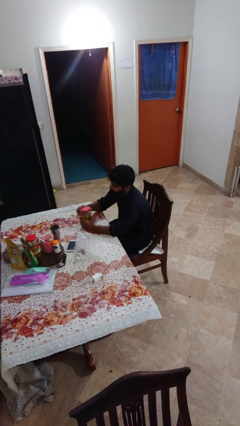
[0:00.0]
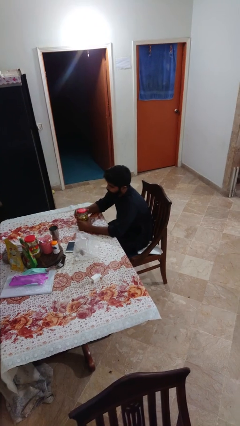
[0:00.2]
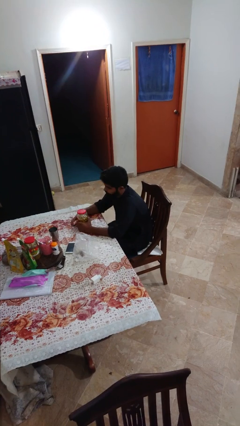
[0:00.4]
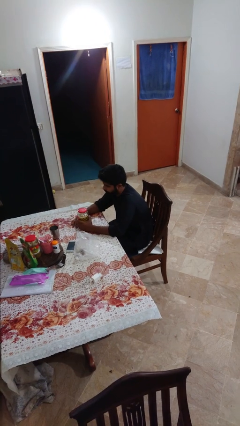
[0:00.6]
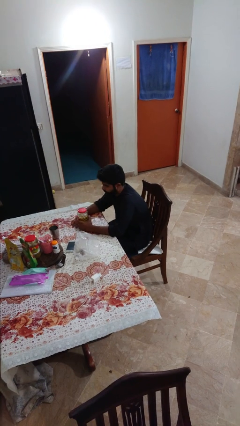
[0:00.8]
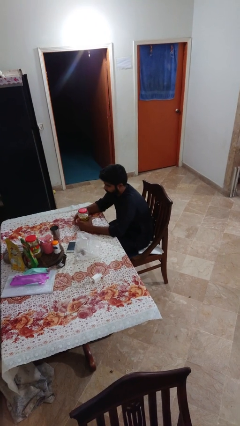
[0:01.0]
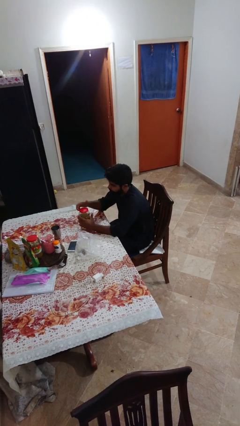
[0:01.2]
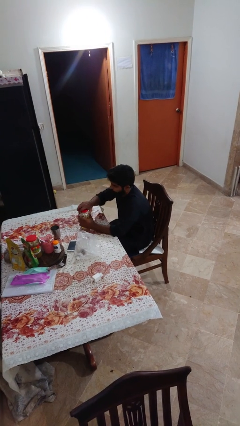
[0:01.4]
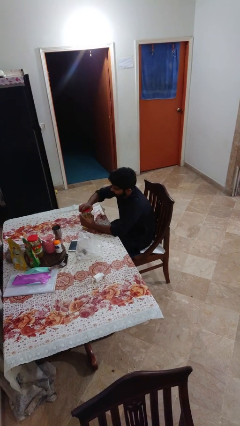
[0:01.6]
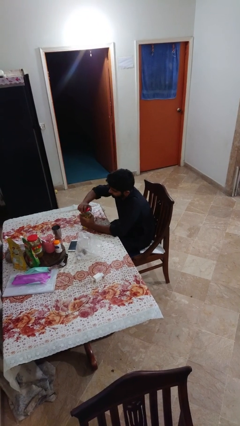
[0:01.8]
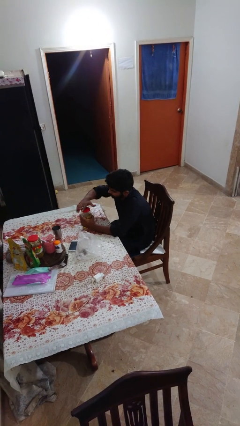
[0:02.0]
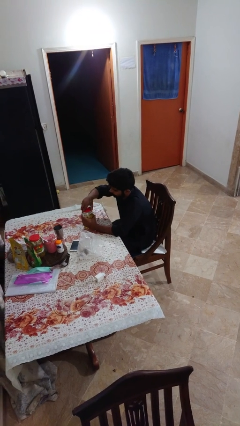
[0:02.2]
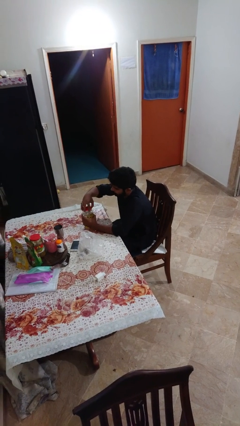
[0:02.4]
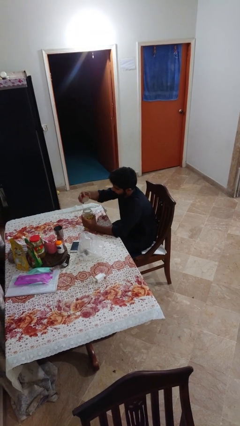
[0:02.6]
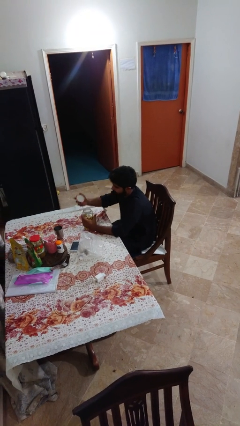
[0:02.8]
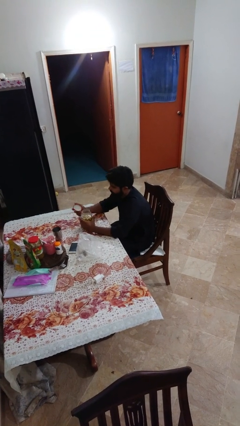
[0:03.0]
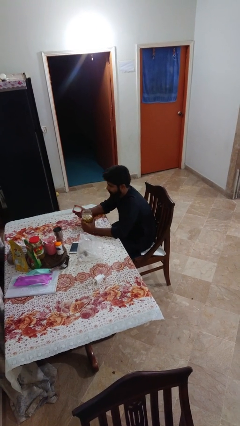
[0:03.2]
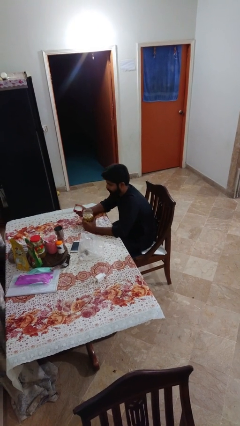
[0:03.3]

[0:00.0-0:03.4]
person opens jar

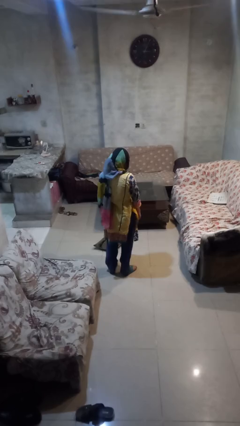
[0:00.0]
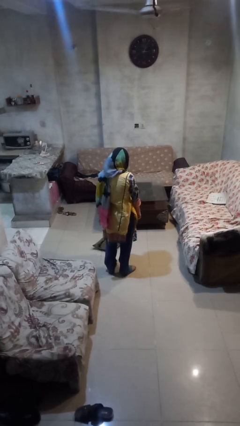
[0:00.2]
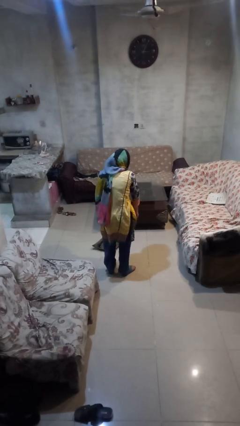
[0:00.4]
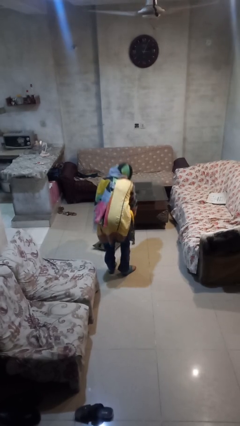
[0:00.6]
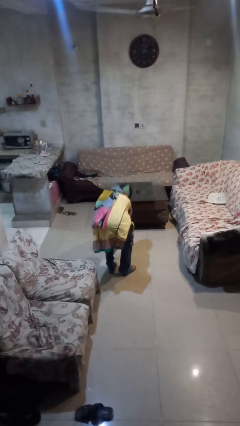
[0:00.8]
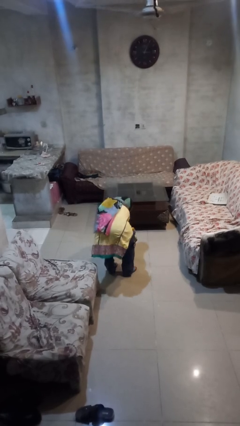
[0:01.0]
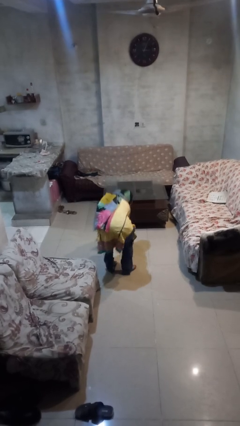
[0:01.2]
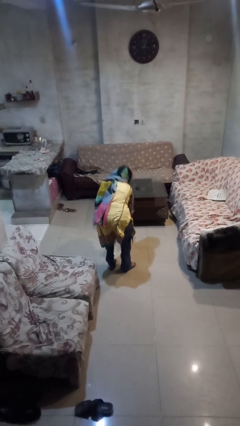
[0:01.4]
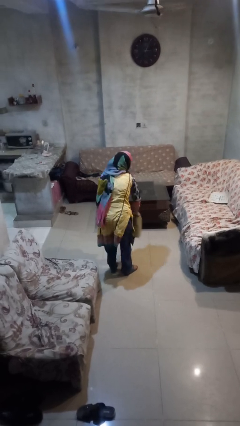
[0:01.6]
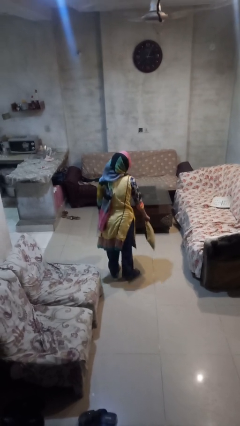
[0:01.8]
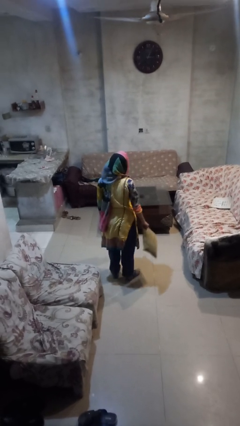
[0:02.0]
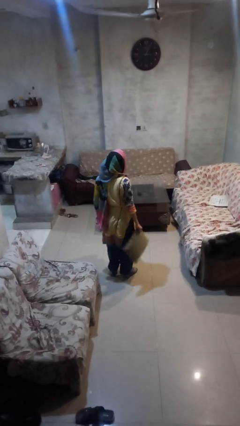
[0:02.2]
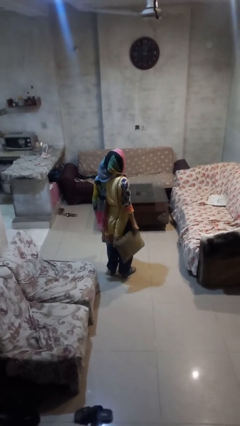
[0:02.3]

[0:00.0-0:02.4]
person picks up object from floor

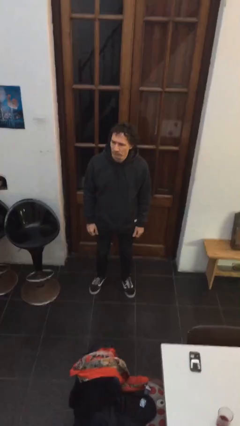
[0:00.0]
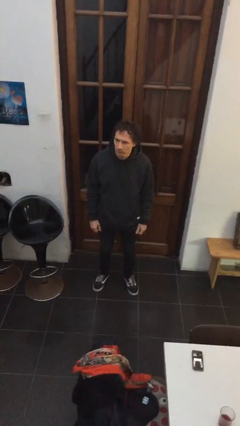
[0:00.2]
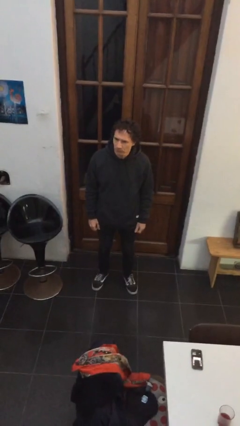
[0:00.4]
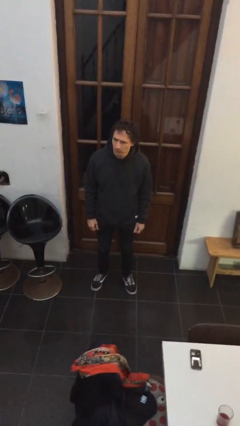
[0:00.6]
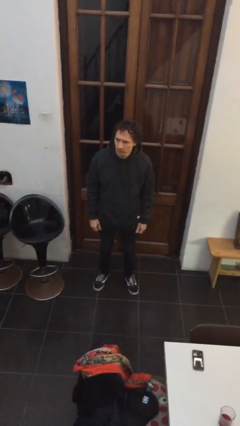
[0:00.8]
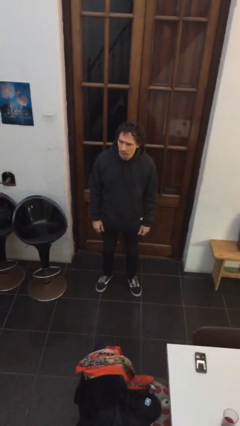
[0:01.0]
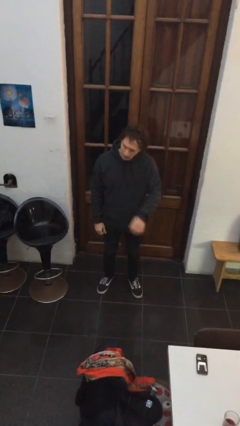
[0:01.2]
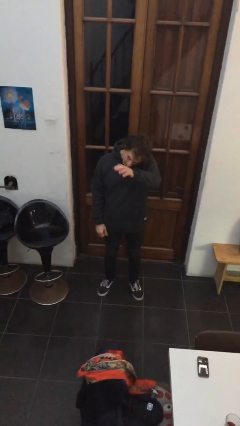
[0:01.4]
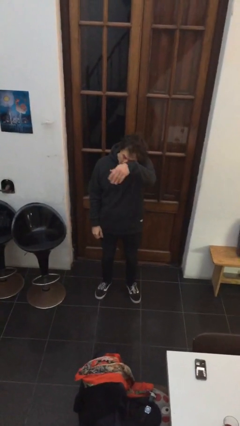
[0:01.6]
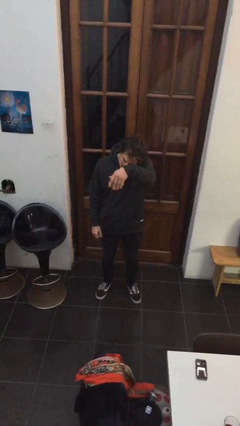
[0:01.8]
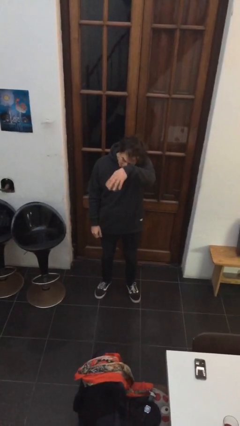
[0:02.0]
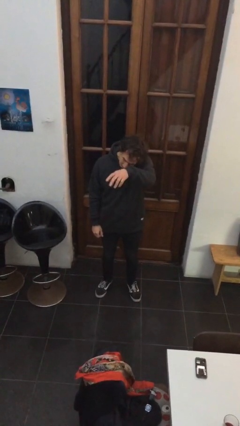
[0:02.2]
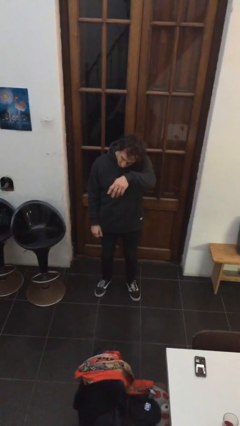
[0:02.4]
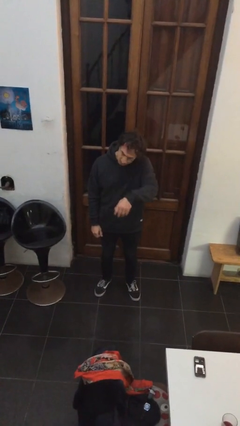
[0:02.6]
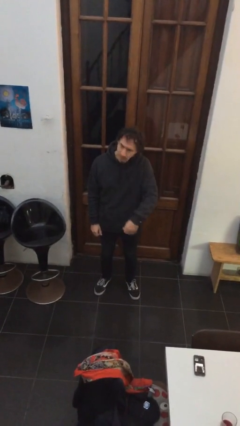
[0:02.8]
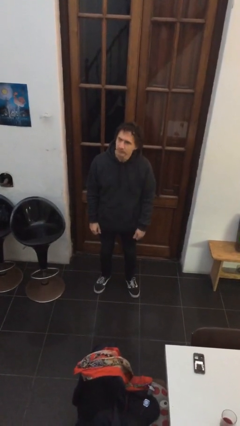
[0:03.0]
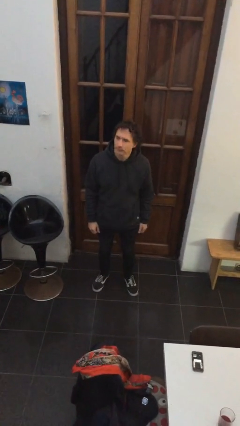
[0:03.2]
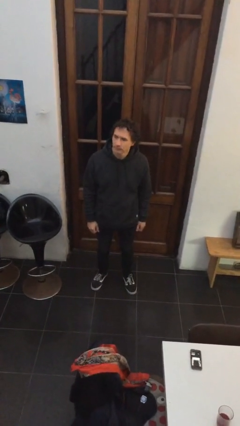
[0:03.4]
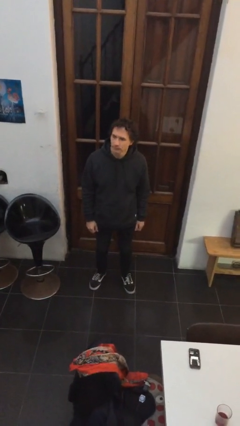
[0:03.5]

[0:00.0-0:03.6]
person gestures come here

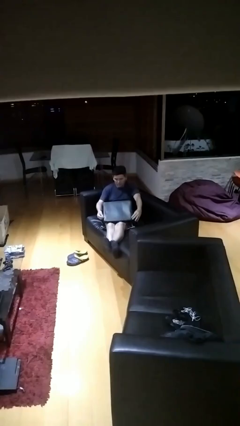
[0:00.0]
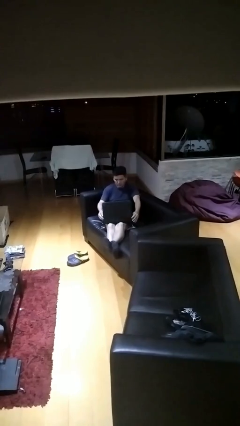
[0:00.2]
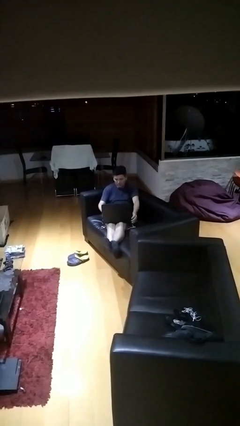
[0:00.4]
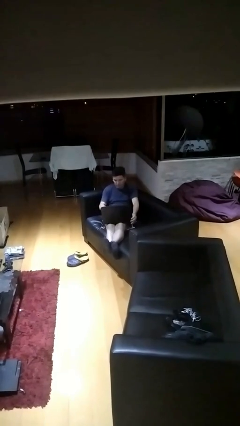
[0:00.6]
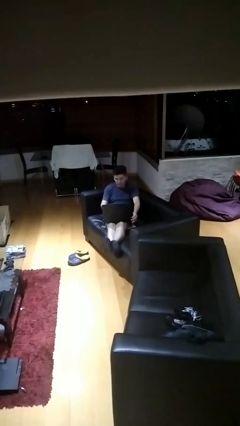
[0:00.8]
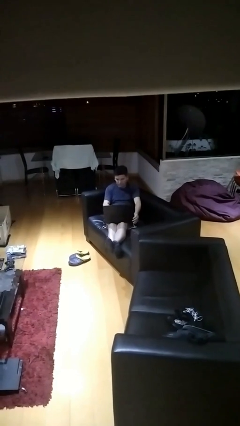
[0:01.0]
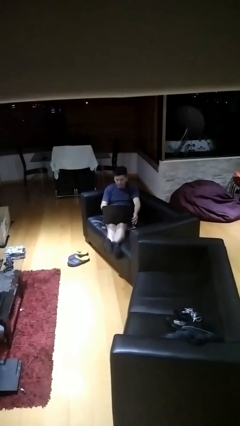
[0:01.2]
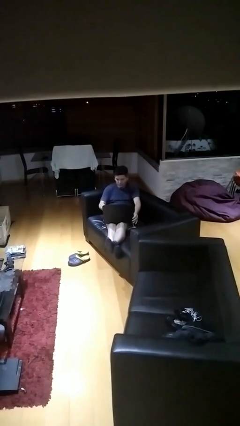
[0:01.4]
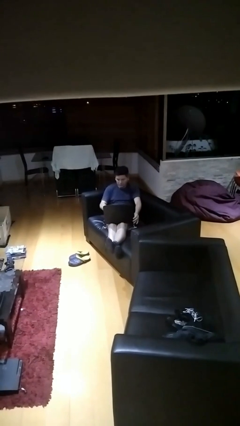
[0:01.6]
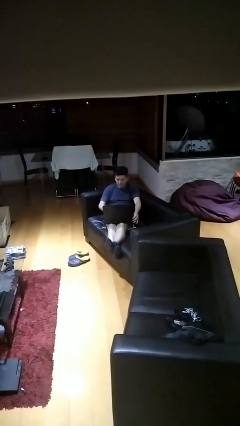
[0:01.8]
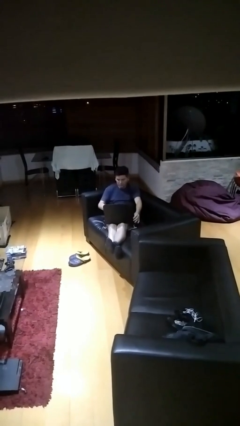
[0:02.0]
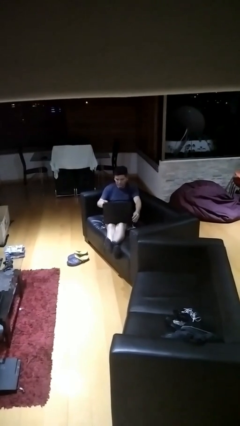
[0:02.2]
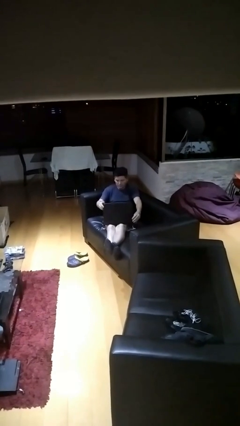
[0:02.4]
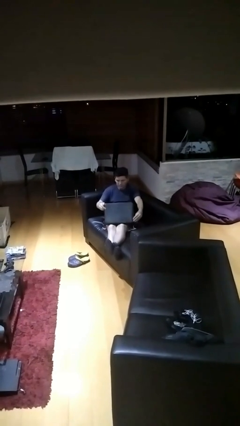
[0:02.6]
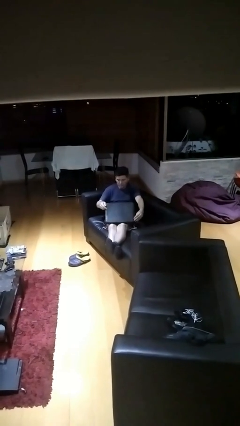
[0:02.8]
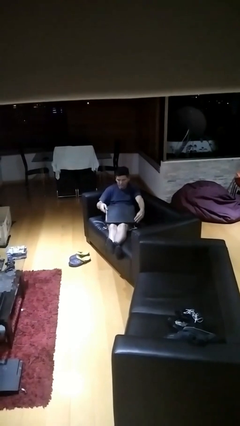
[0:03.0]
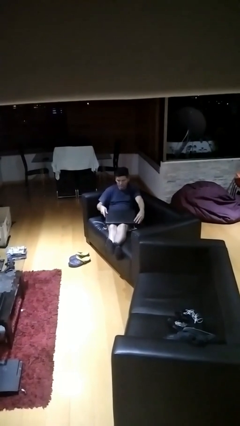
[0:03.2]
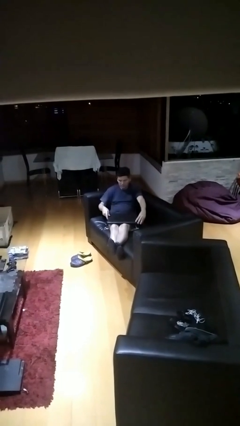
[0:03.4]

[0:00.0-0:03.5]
person interacts with laptop

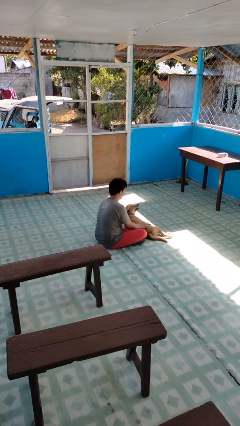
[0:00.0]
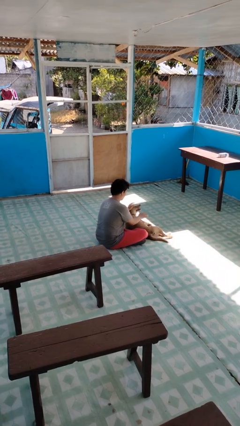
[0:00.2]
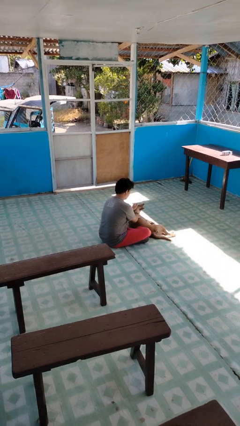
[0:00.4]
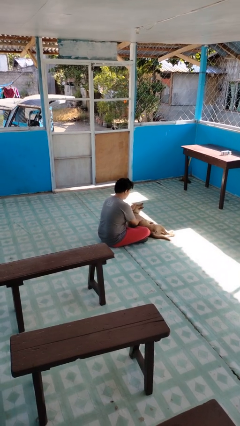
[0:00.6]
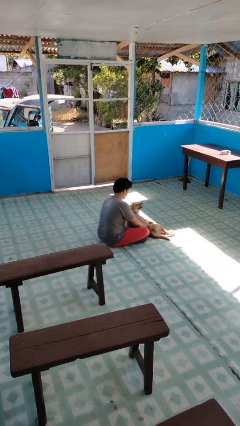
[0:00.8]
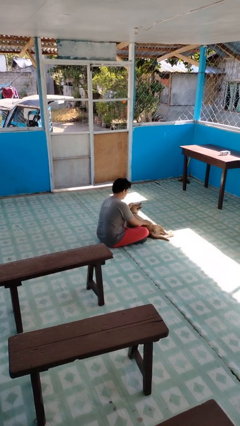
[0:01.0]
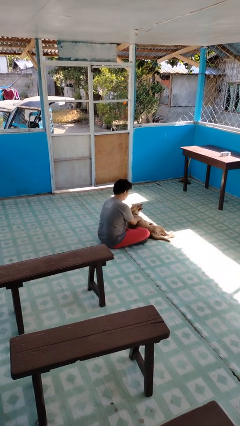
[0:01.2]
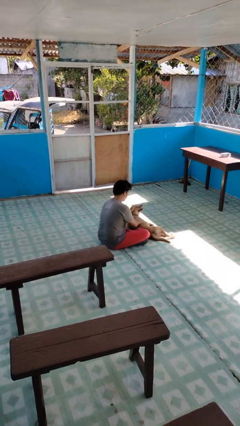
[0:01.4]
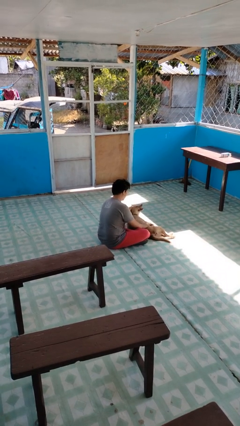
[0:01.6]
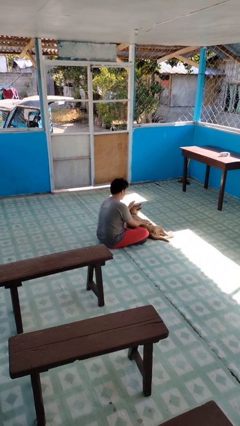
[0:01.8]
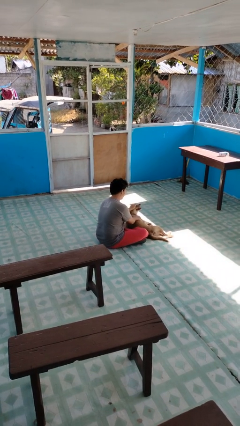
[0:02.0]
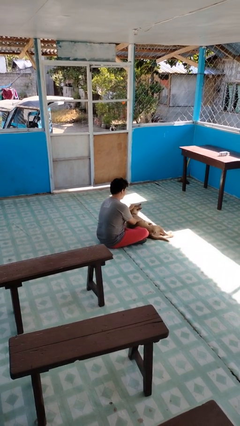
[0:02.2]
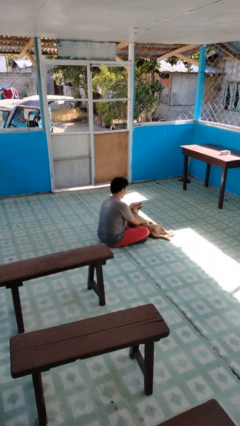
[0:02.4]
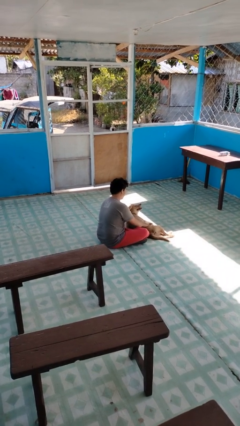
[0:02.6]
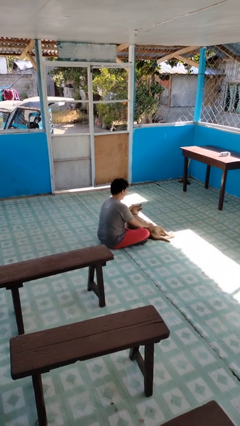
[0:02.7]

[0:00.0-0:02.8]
person pets dog

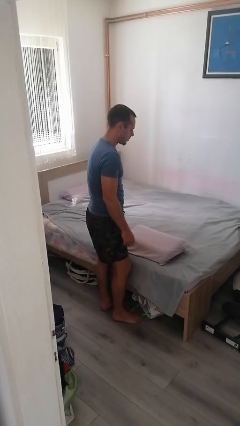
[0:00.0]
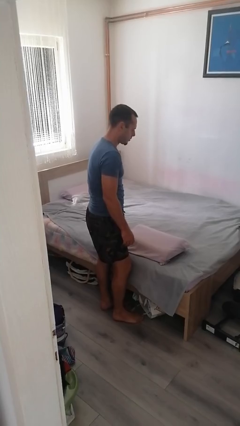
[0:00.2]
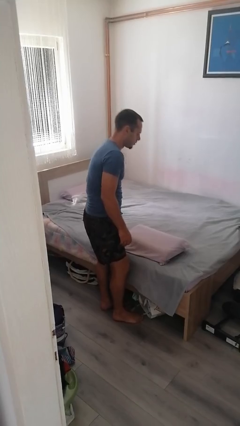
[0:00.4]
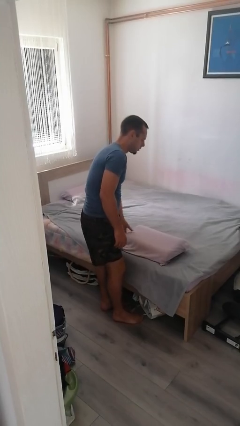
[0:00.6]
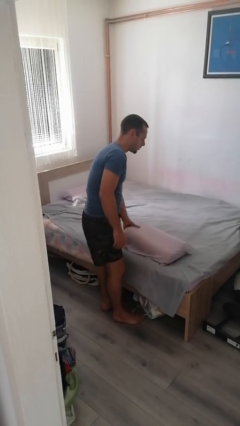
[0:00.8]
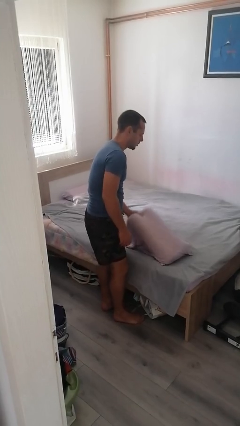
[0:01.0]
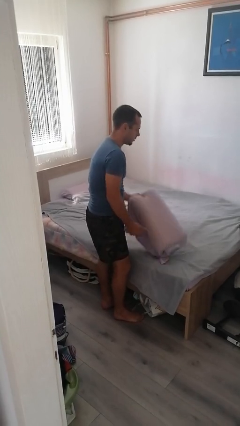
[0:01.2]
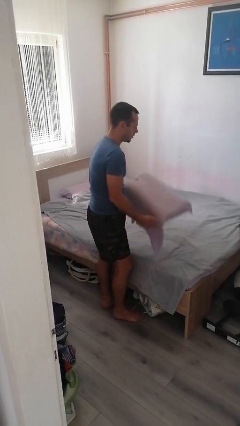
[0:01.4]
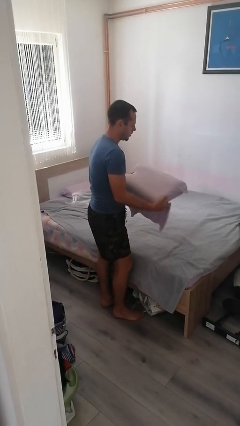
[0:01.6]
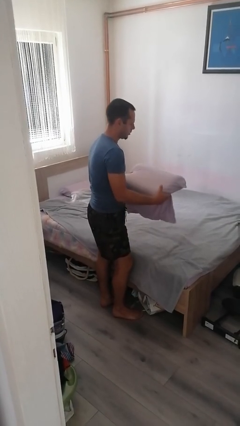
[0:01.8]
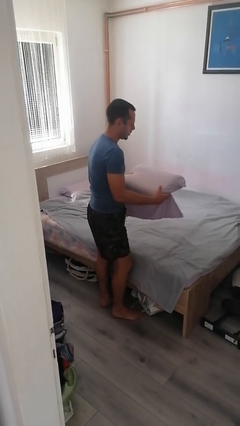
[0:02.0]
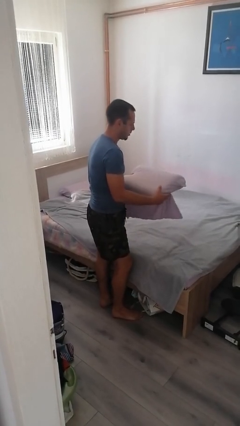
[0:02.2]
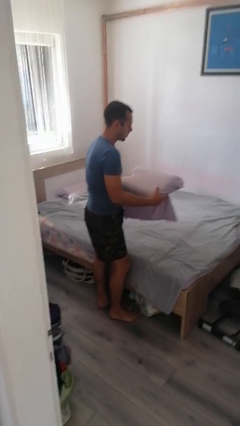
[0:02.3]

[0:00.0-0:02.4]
person picks up object from bed
